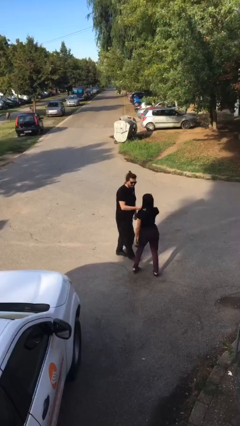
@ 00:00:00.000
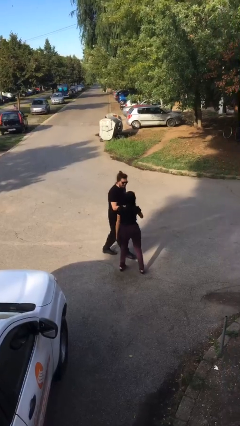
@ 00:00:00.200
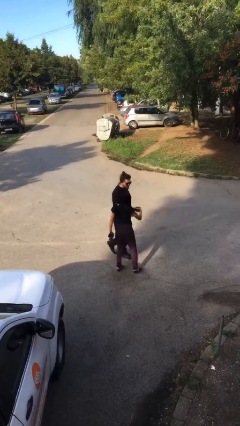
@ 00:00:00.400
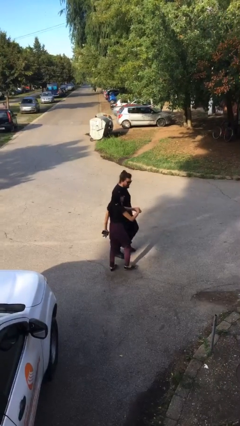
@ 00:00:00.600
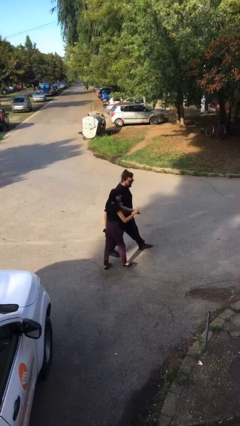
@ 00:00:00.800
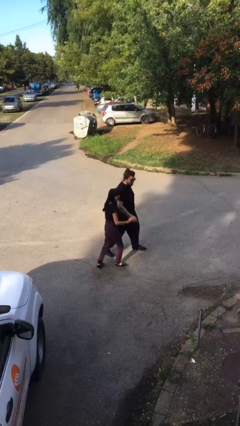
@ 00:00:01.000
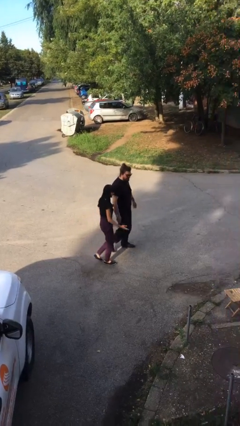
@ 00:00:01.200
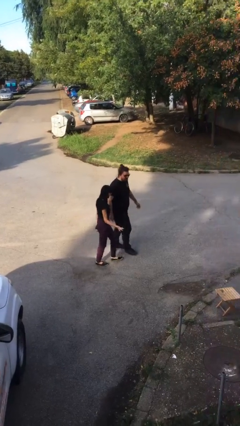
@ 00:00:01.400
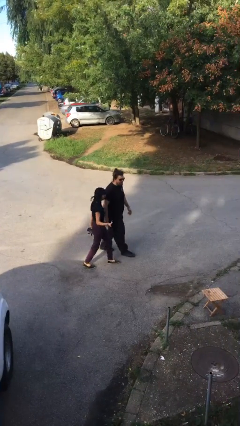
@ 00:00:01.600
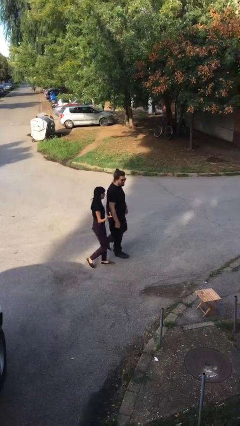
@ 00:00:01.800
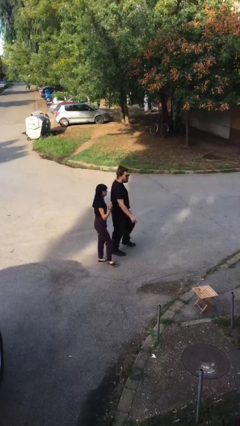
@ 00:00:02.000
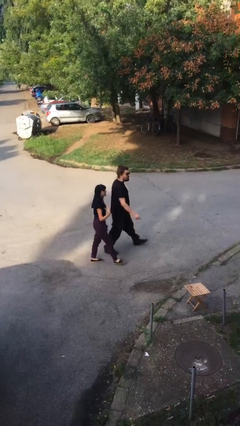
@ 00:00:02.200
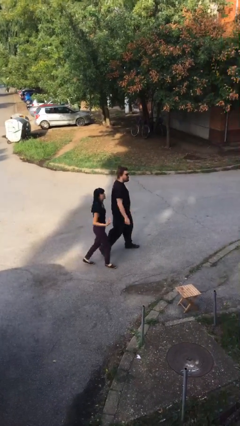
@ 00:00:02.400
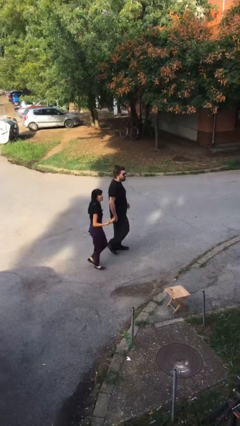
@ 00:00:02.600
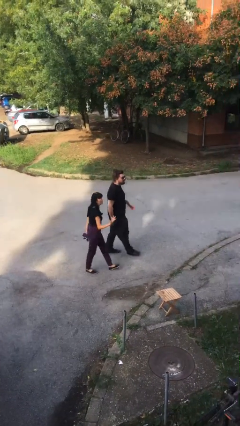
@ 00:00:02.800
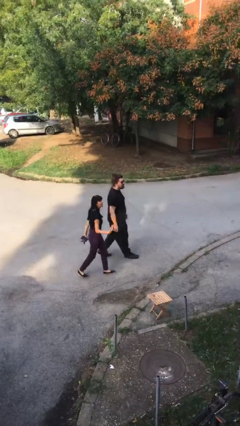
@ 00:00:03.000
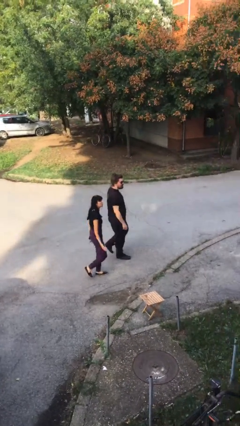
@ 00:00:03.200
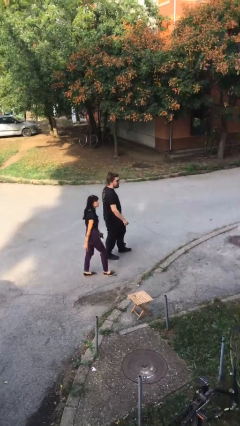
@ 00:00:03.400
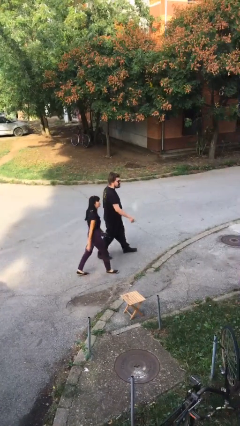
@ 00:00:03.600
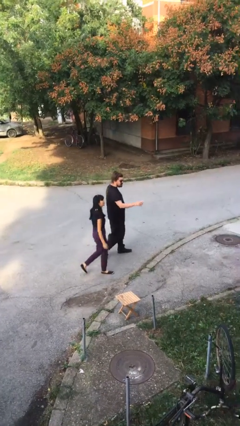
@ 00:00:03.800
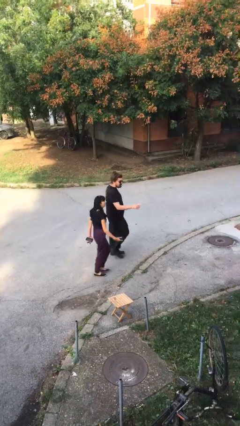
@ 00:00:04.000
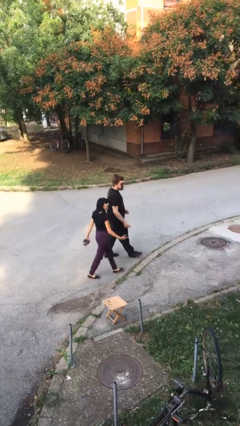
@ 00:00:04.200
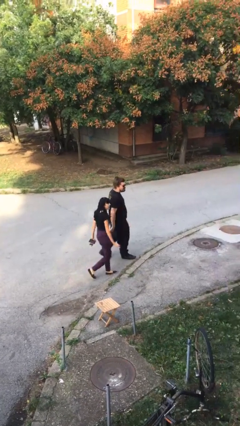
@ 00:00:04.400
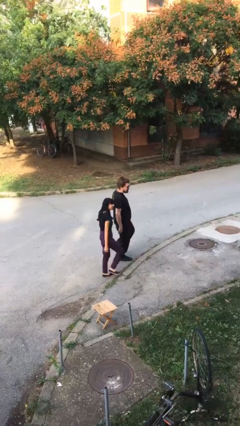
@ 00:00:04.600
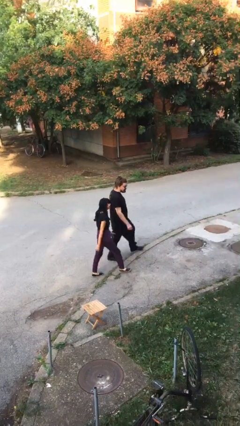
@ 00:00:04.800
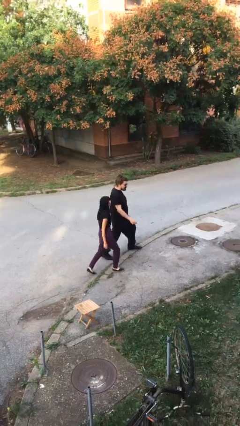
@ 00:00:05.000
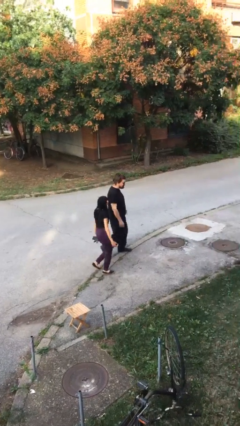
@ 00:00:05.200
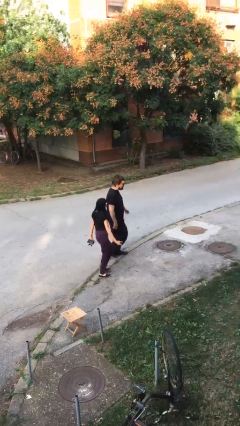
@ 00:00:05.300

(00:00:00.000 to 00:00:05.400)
person talks to person

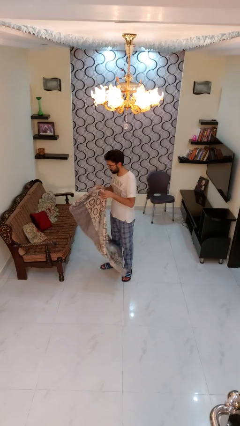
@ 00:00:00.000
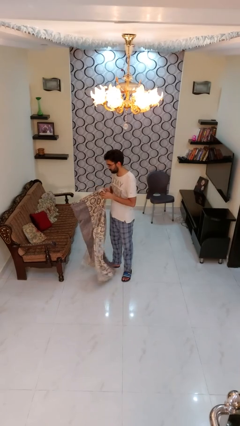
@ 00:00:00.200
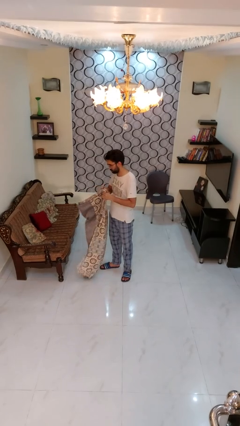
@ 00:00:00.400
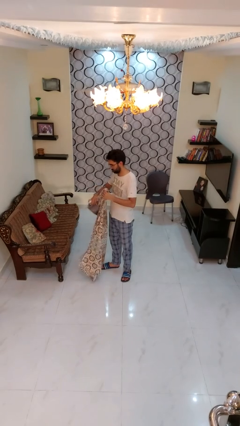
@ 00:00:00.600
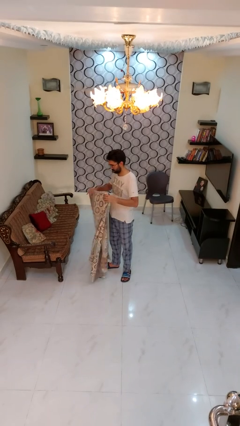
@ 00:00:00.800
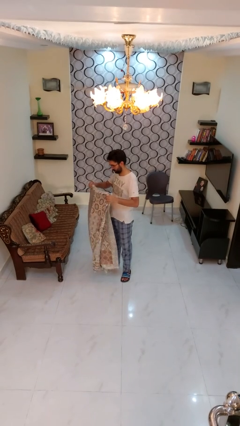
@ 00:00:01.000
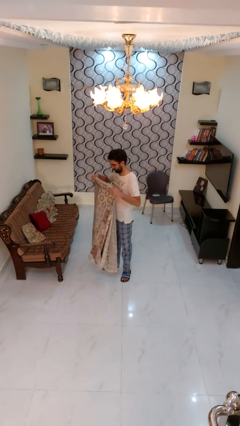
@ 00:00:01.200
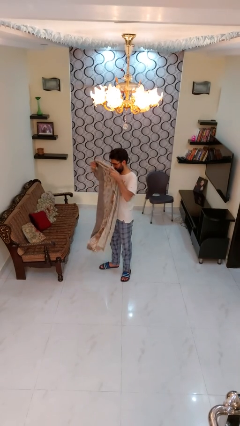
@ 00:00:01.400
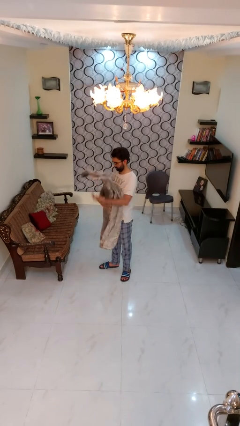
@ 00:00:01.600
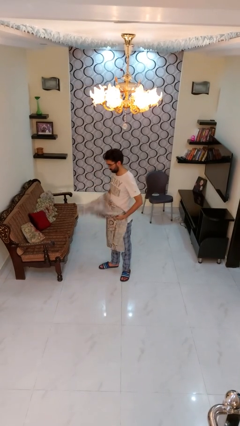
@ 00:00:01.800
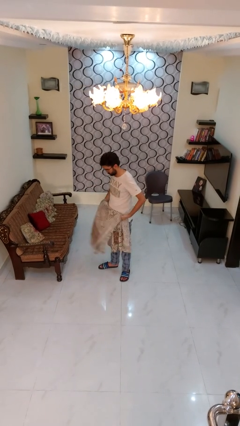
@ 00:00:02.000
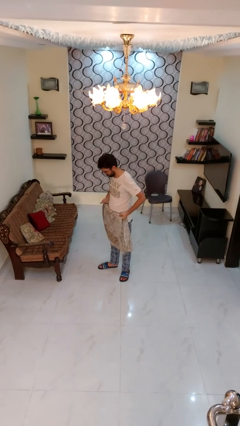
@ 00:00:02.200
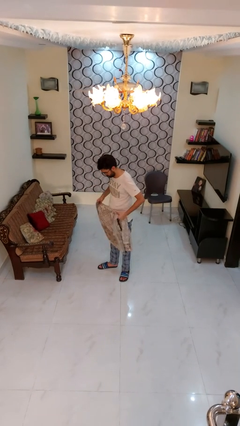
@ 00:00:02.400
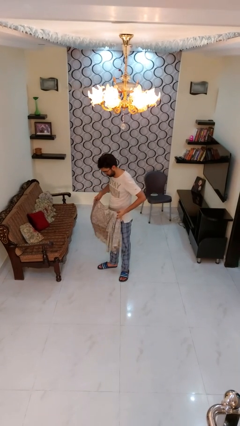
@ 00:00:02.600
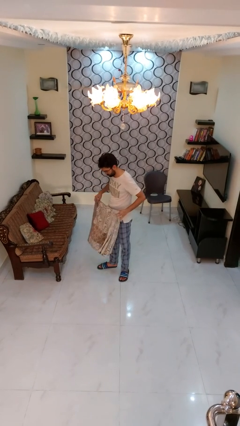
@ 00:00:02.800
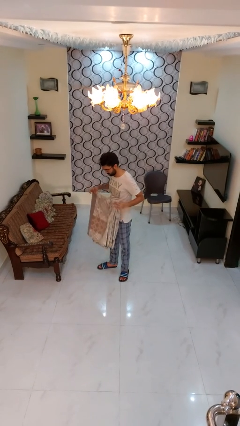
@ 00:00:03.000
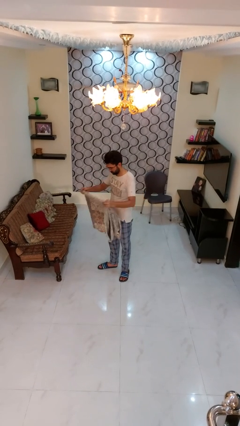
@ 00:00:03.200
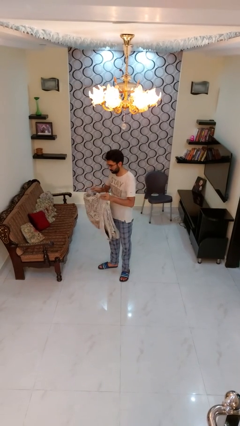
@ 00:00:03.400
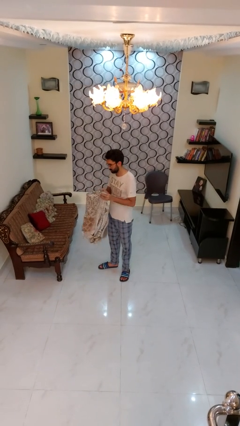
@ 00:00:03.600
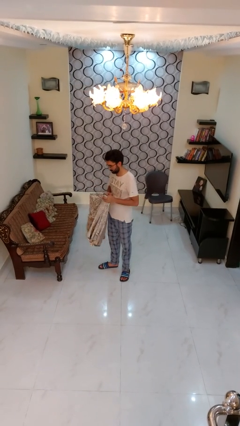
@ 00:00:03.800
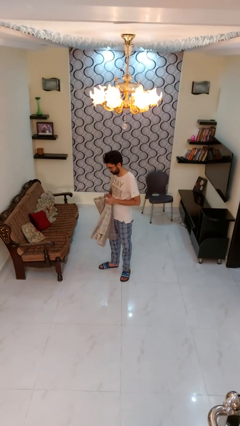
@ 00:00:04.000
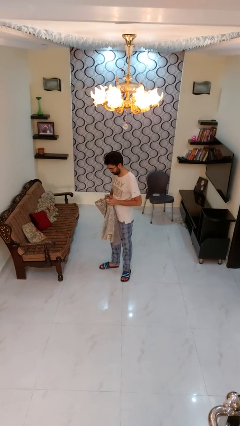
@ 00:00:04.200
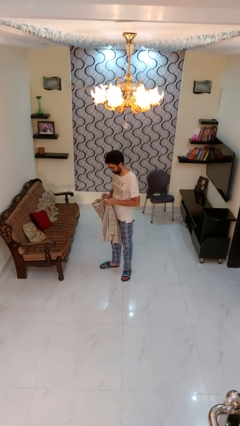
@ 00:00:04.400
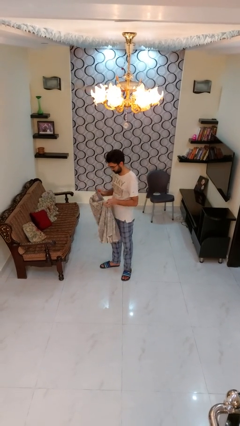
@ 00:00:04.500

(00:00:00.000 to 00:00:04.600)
person folds blanket

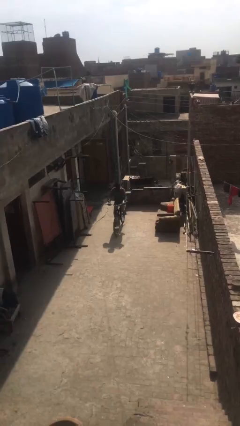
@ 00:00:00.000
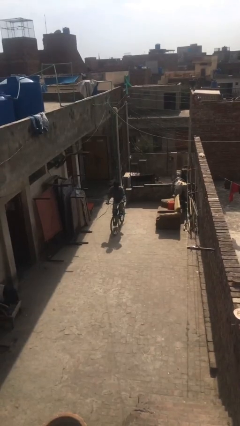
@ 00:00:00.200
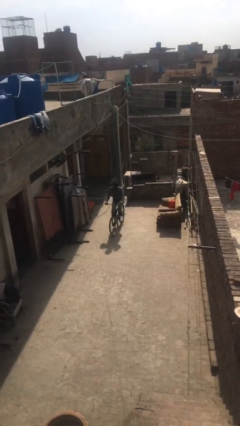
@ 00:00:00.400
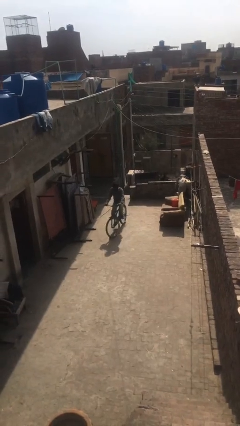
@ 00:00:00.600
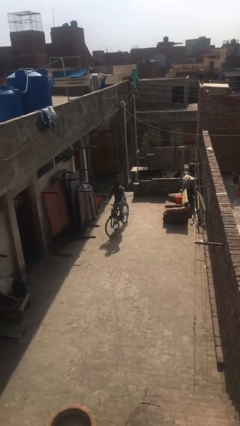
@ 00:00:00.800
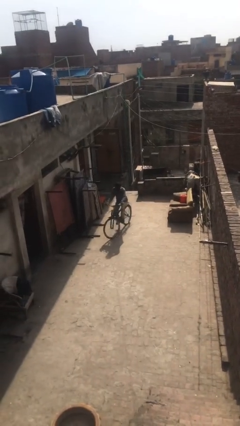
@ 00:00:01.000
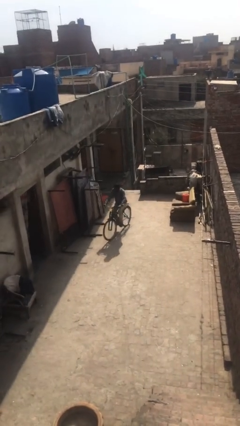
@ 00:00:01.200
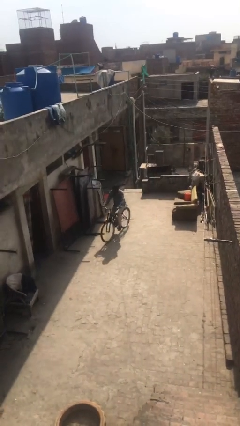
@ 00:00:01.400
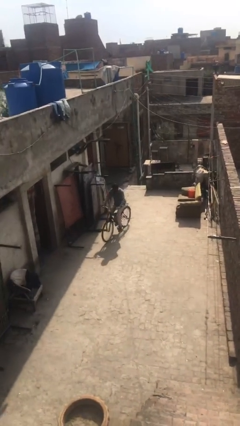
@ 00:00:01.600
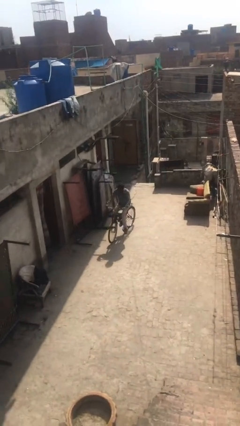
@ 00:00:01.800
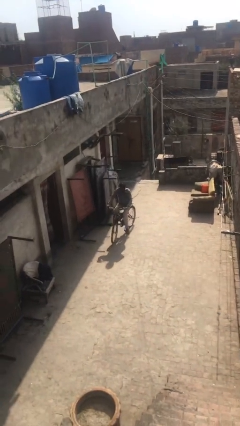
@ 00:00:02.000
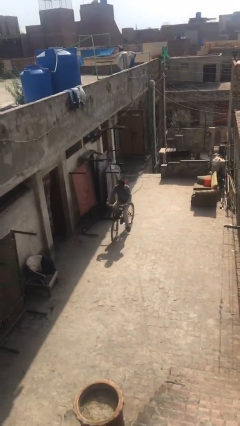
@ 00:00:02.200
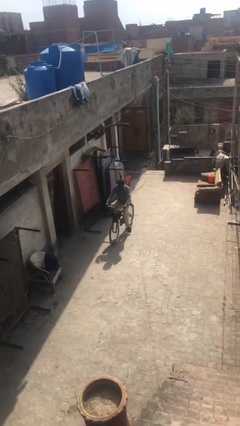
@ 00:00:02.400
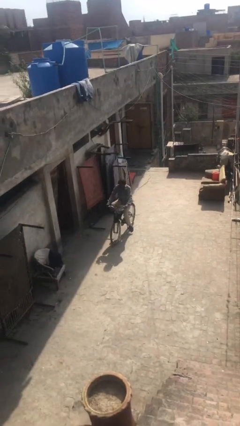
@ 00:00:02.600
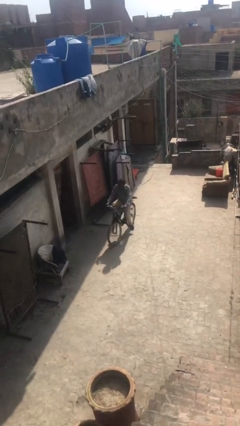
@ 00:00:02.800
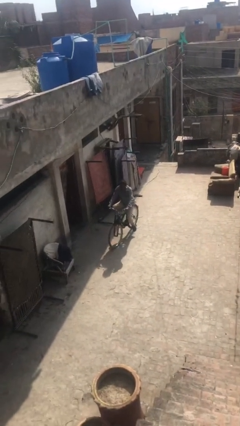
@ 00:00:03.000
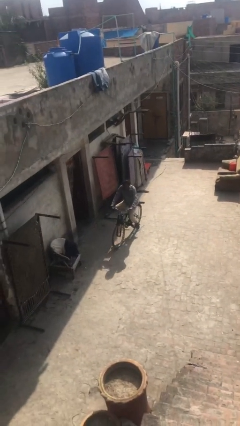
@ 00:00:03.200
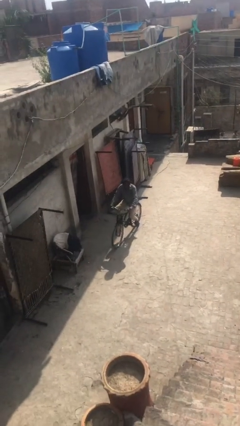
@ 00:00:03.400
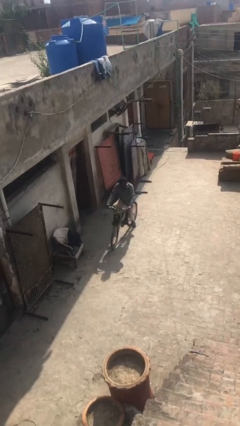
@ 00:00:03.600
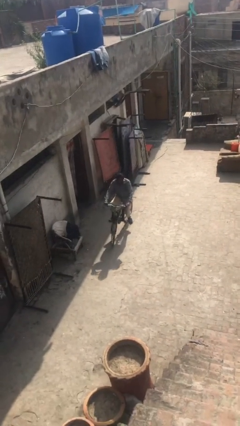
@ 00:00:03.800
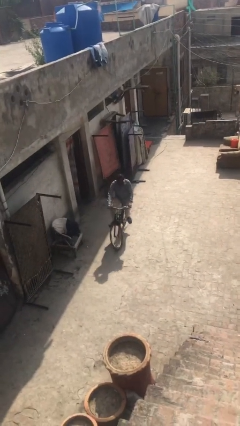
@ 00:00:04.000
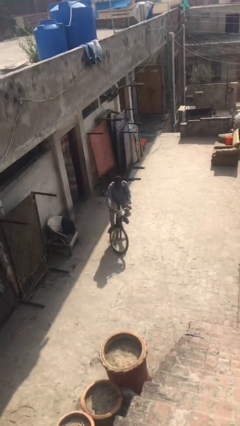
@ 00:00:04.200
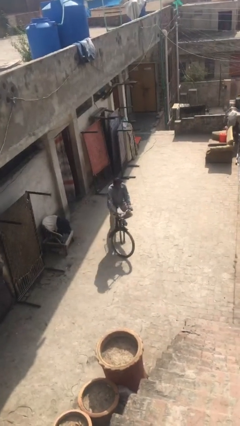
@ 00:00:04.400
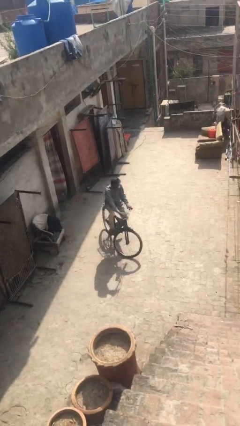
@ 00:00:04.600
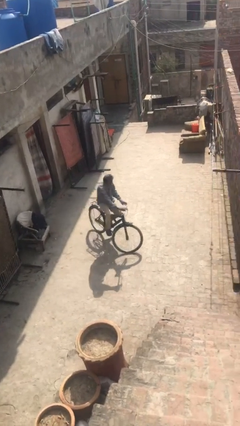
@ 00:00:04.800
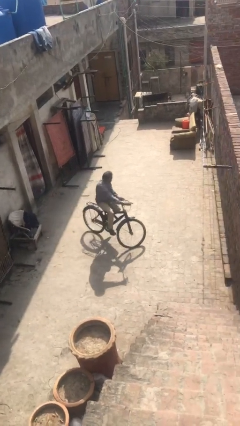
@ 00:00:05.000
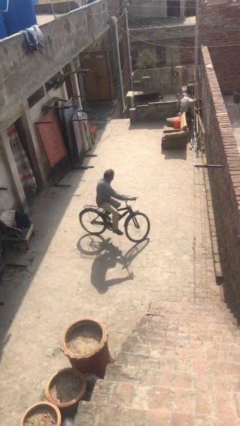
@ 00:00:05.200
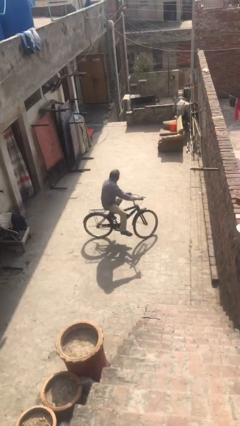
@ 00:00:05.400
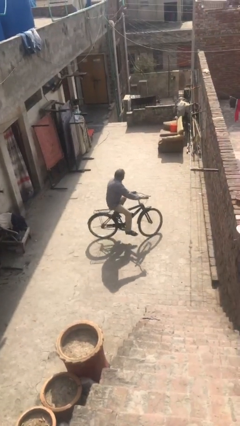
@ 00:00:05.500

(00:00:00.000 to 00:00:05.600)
person rides bicycle

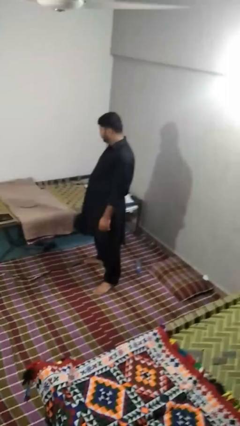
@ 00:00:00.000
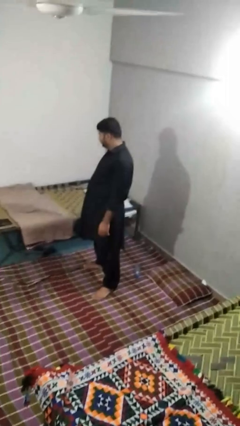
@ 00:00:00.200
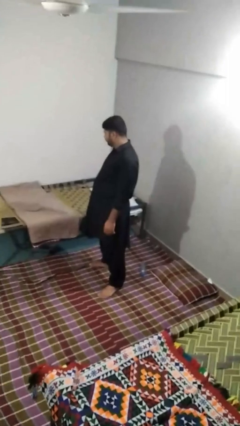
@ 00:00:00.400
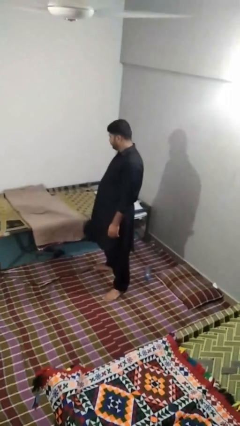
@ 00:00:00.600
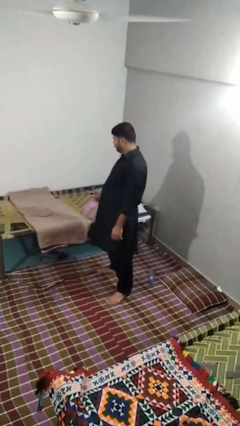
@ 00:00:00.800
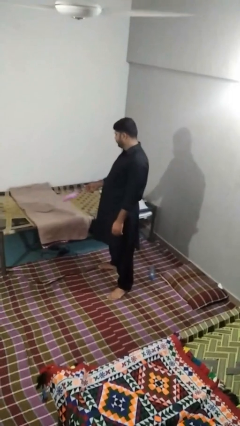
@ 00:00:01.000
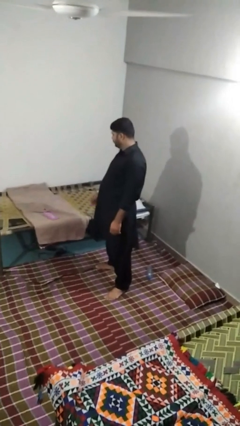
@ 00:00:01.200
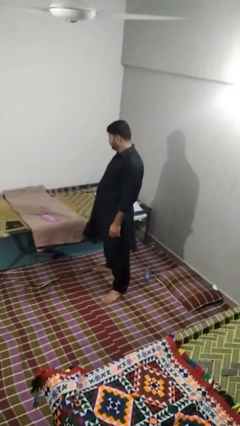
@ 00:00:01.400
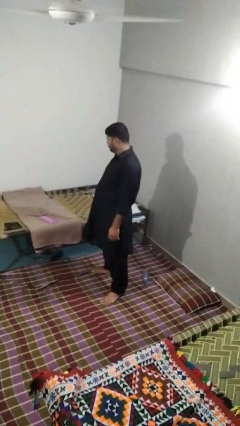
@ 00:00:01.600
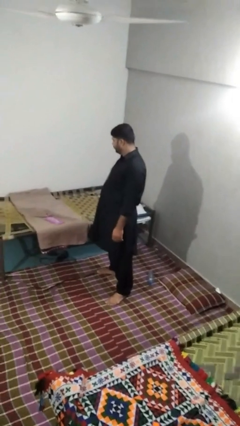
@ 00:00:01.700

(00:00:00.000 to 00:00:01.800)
person puts down object on bed
